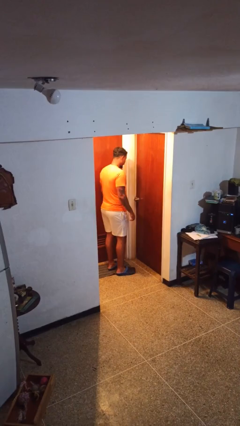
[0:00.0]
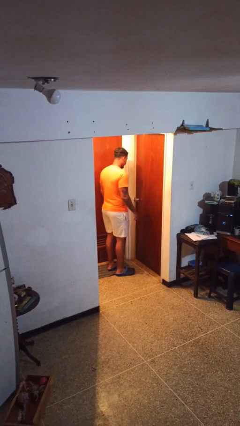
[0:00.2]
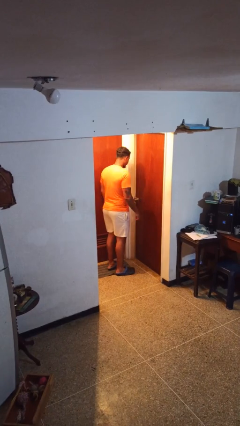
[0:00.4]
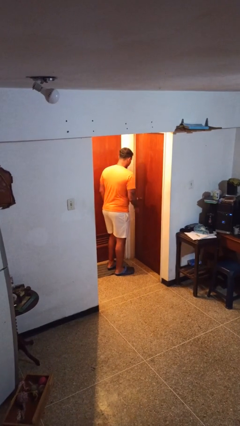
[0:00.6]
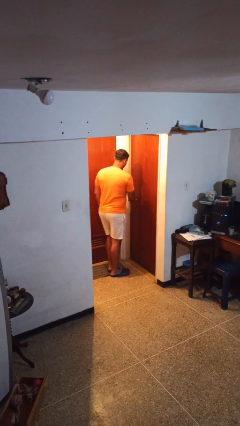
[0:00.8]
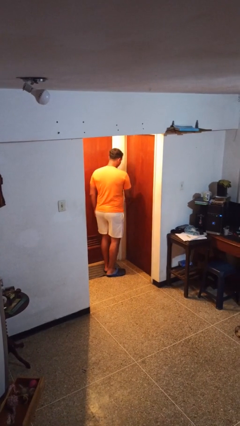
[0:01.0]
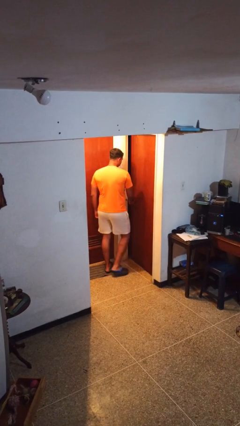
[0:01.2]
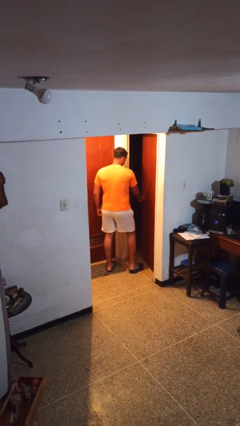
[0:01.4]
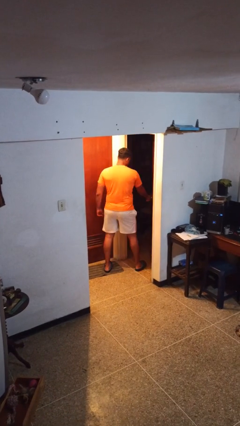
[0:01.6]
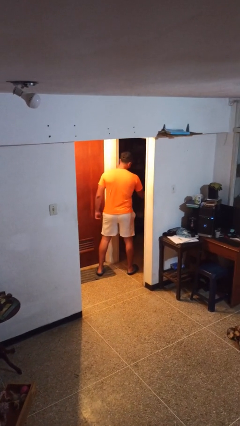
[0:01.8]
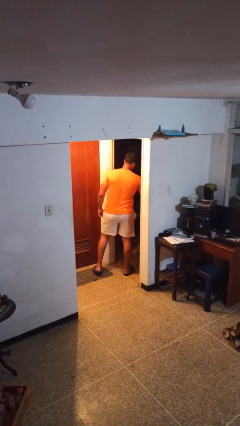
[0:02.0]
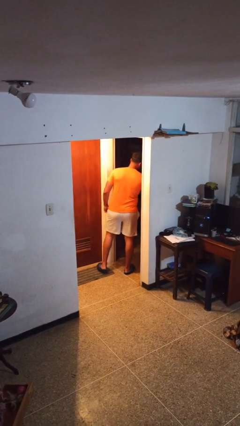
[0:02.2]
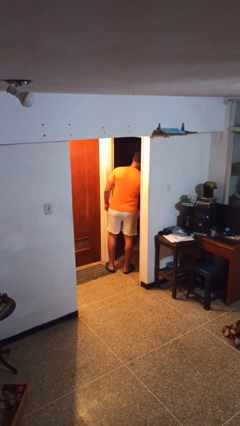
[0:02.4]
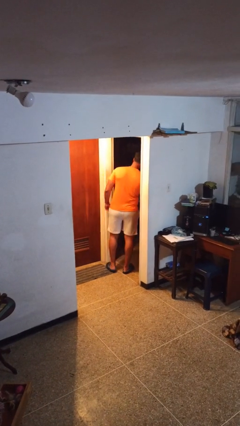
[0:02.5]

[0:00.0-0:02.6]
person opens facility door

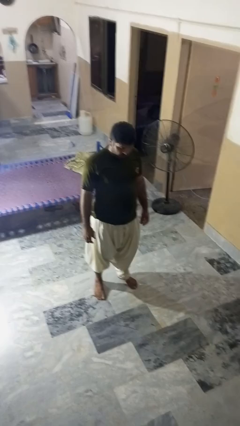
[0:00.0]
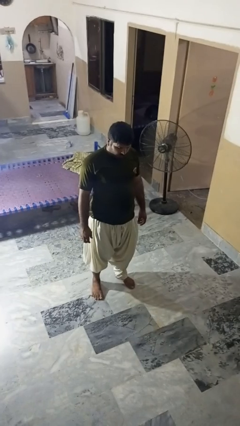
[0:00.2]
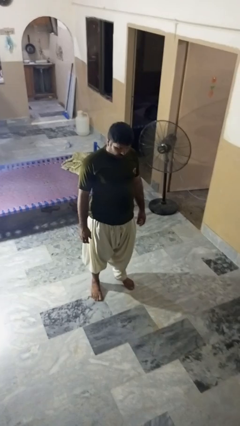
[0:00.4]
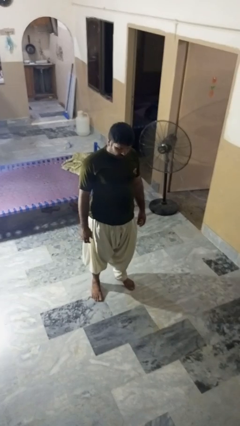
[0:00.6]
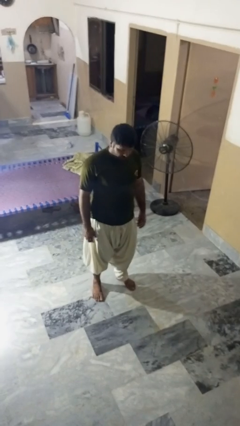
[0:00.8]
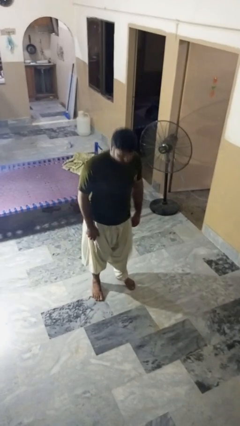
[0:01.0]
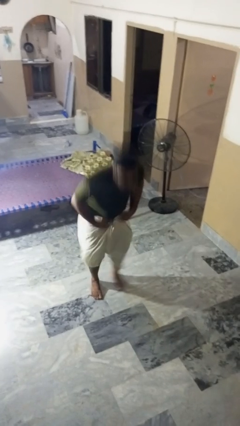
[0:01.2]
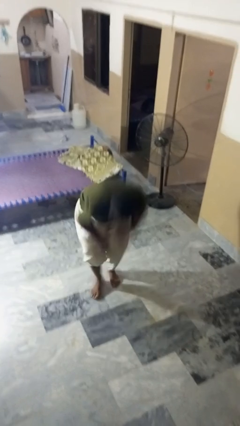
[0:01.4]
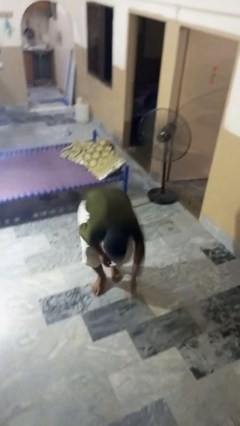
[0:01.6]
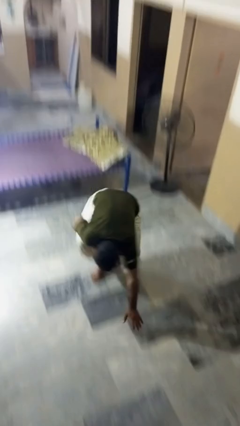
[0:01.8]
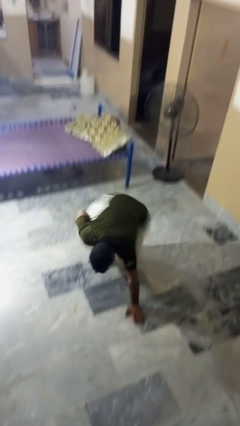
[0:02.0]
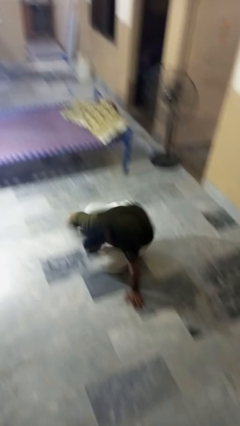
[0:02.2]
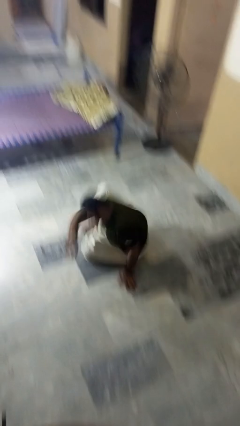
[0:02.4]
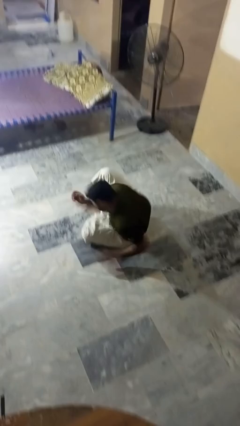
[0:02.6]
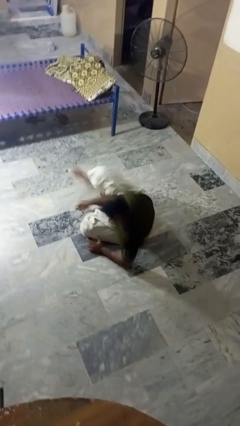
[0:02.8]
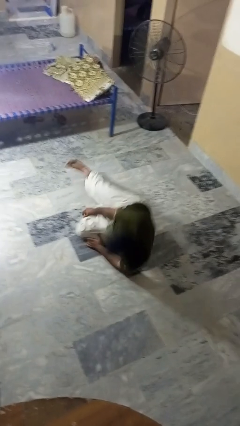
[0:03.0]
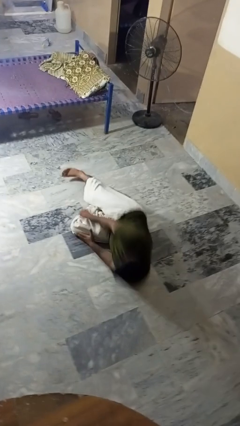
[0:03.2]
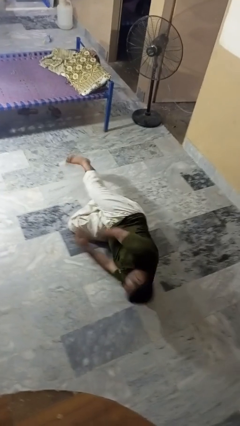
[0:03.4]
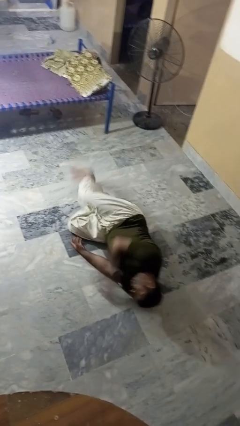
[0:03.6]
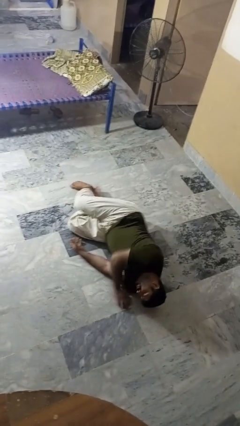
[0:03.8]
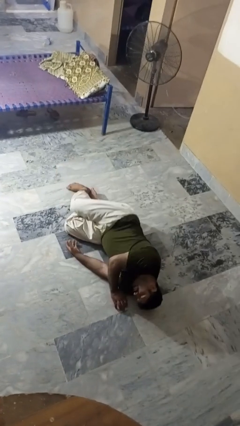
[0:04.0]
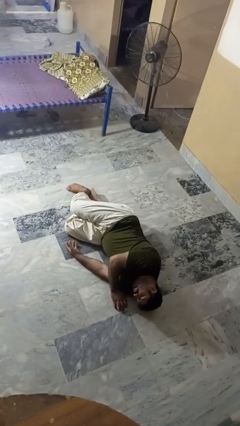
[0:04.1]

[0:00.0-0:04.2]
person falls while standing

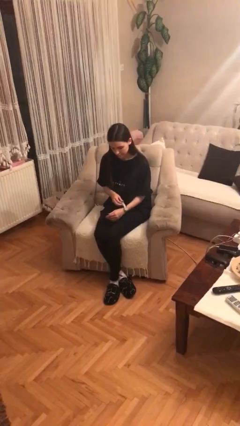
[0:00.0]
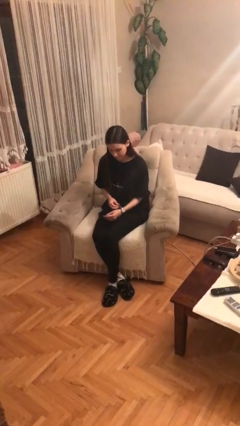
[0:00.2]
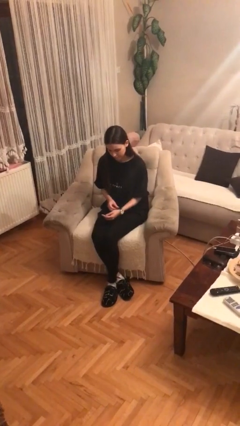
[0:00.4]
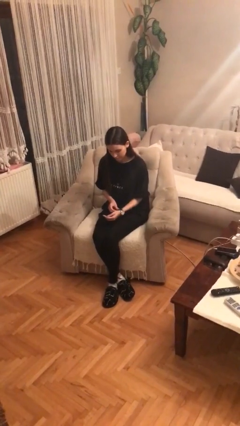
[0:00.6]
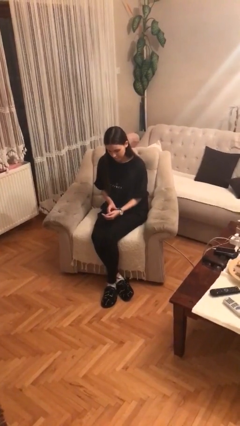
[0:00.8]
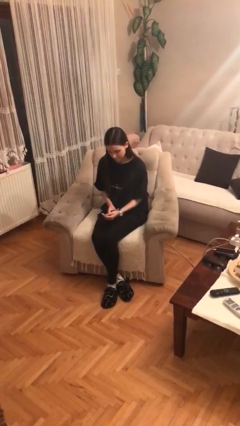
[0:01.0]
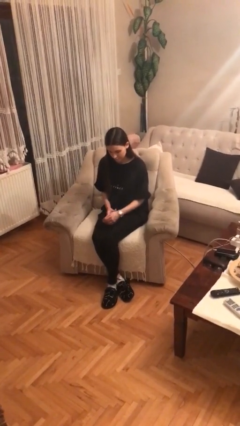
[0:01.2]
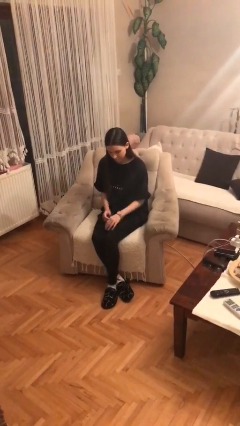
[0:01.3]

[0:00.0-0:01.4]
person puts on wristwatch

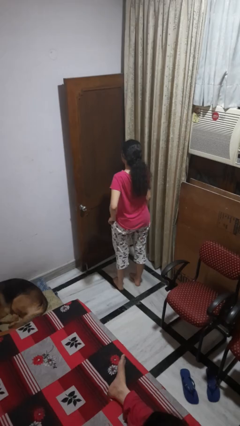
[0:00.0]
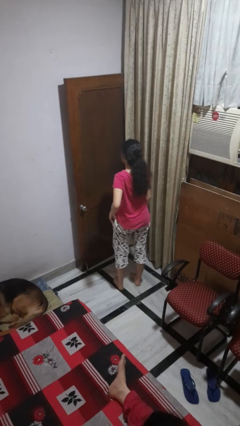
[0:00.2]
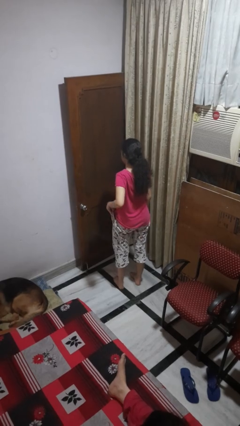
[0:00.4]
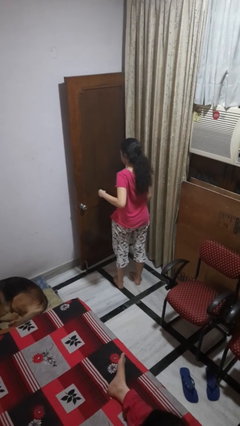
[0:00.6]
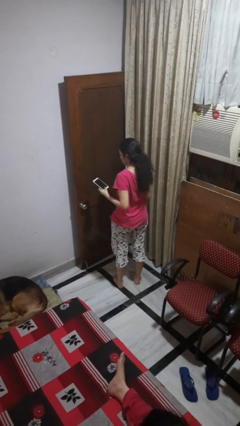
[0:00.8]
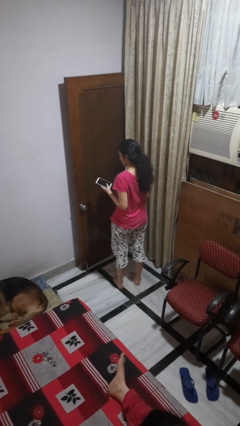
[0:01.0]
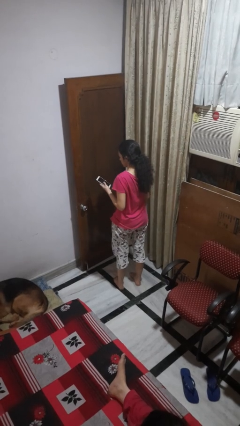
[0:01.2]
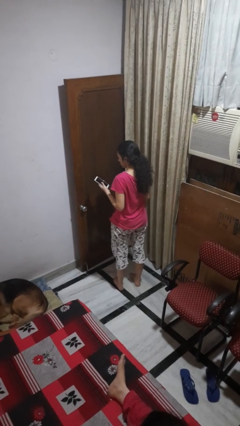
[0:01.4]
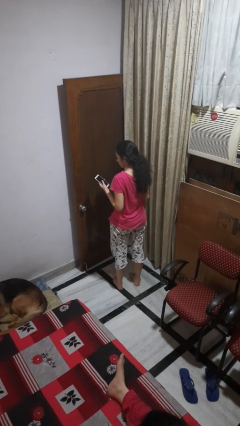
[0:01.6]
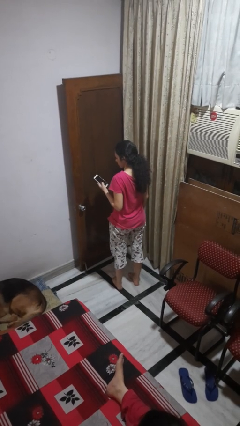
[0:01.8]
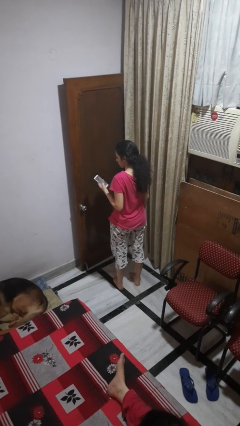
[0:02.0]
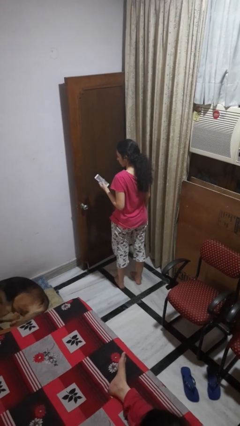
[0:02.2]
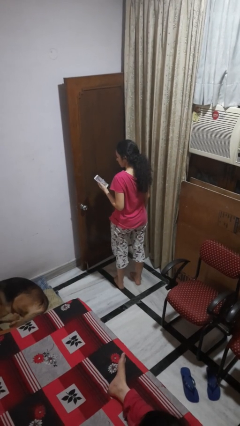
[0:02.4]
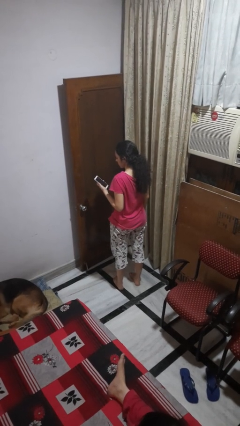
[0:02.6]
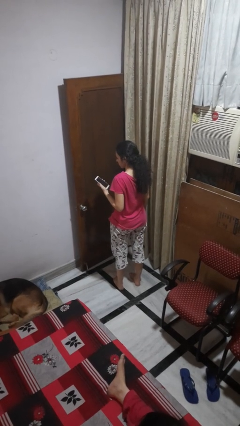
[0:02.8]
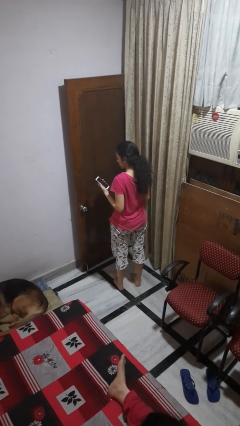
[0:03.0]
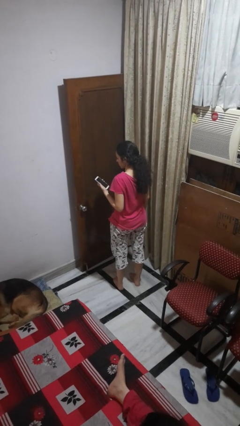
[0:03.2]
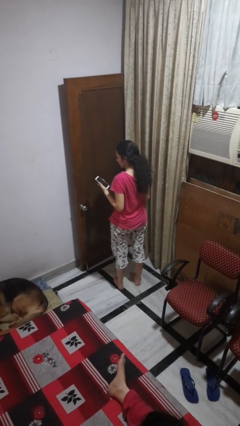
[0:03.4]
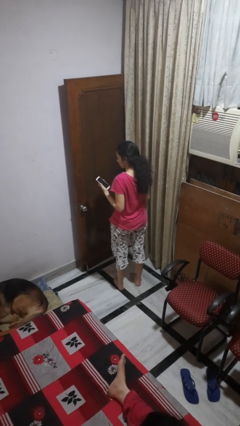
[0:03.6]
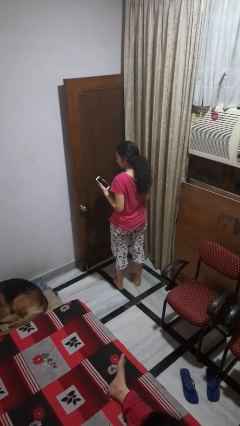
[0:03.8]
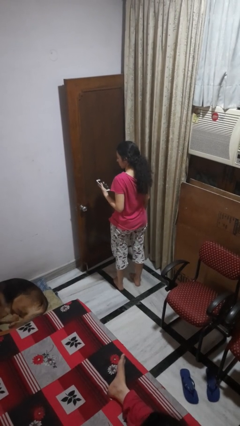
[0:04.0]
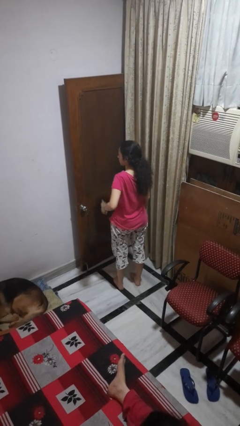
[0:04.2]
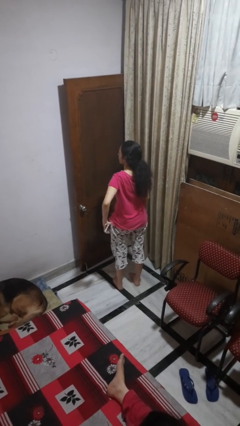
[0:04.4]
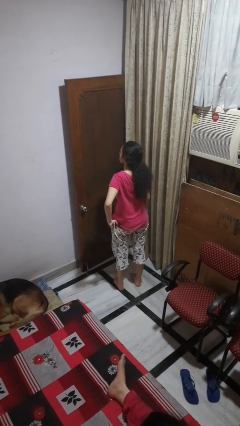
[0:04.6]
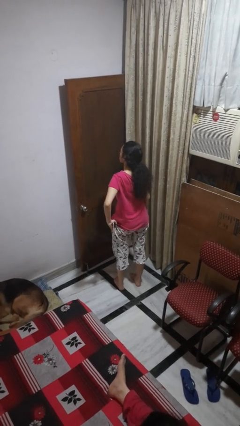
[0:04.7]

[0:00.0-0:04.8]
person takes phone from pocket

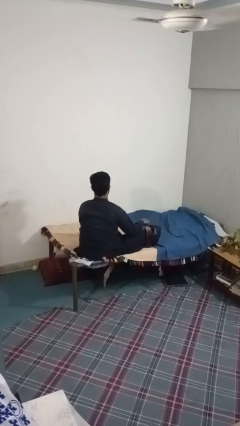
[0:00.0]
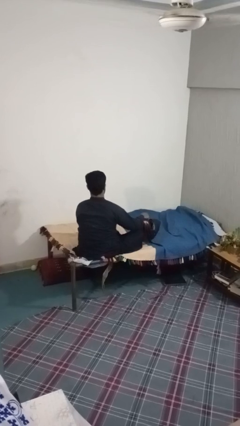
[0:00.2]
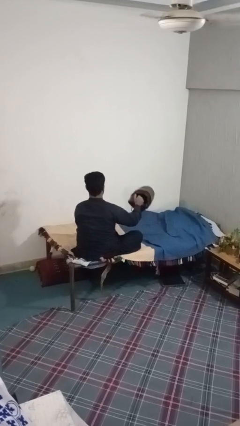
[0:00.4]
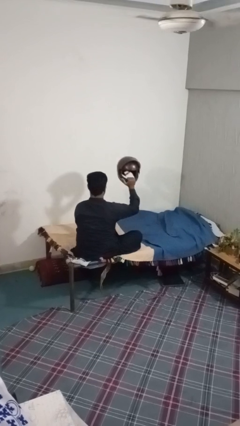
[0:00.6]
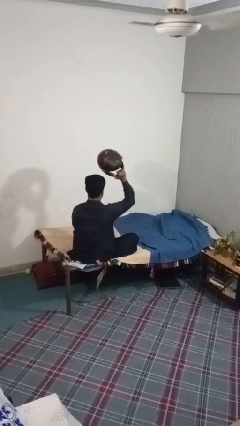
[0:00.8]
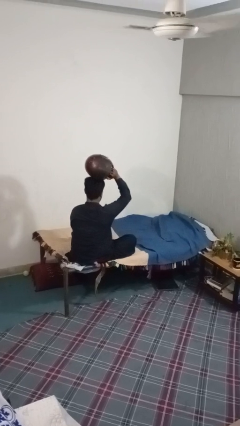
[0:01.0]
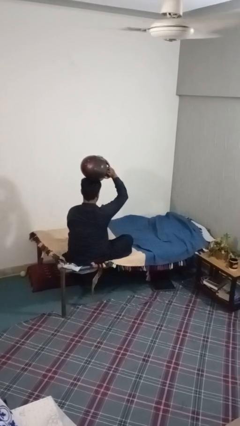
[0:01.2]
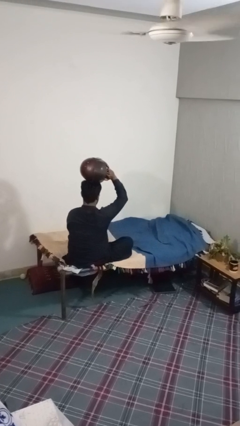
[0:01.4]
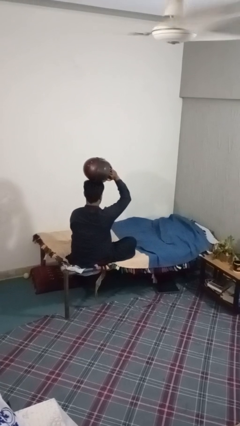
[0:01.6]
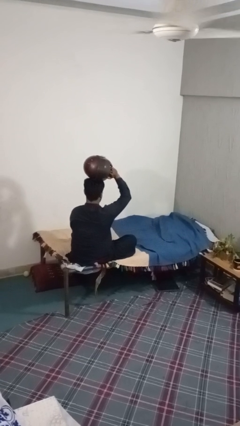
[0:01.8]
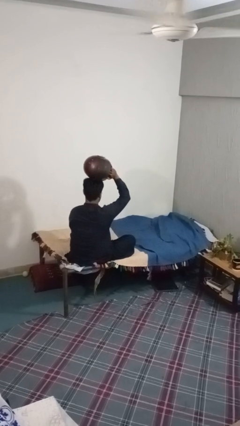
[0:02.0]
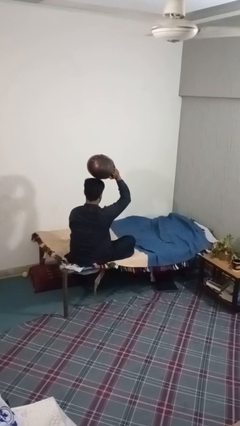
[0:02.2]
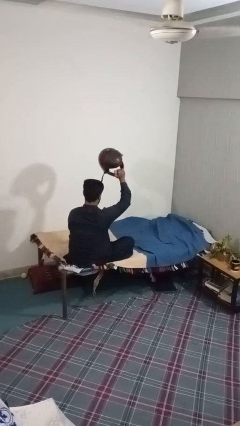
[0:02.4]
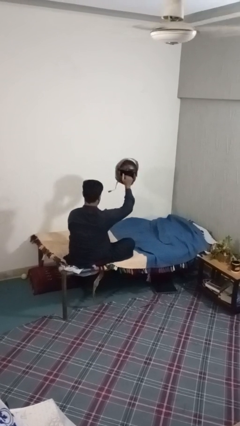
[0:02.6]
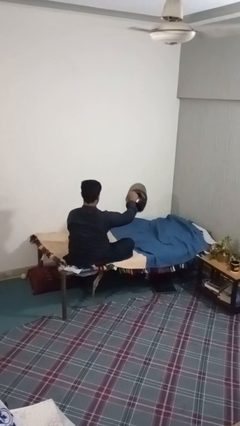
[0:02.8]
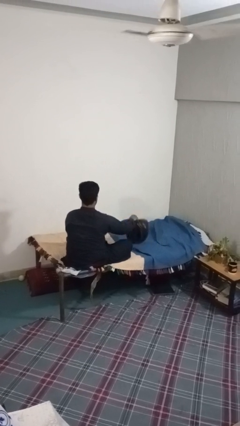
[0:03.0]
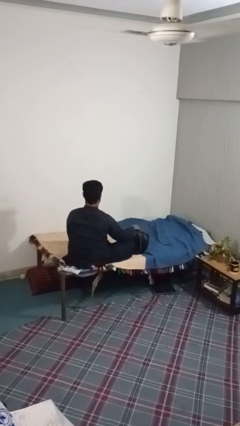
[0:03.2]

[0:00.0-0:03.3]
person holds object above head

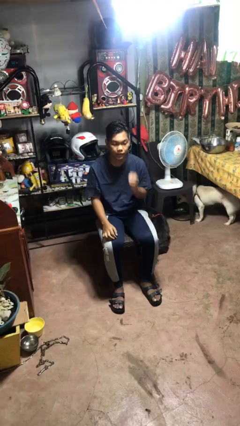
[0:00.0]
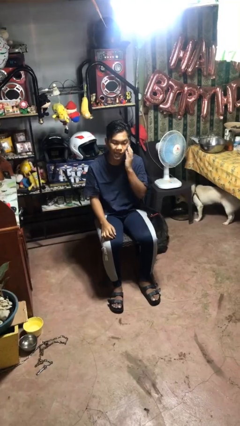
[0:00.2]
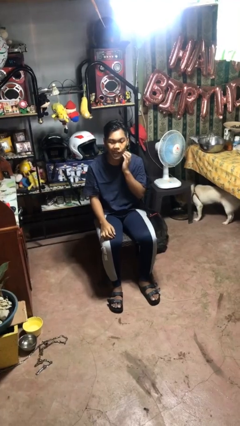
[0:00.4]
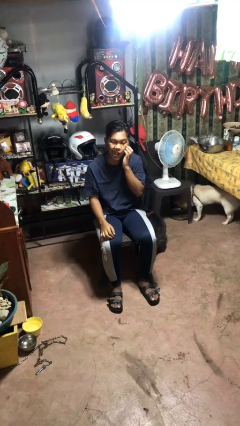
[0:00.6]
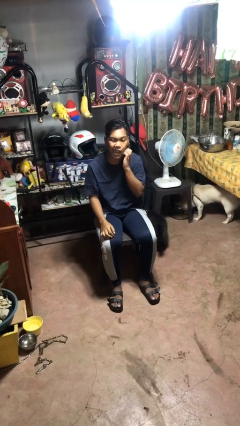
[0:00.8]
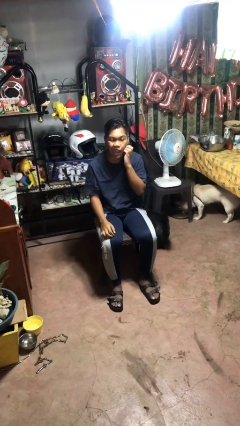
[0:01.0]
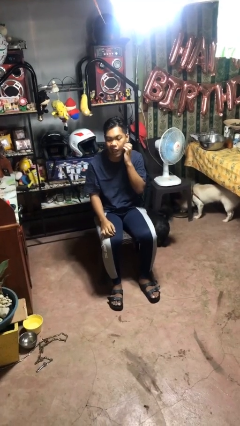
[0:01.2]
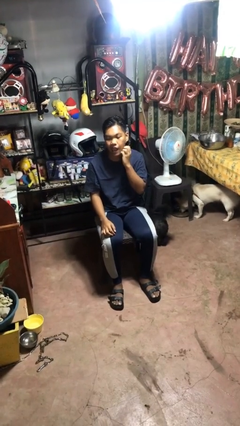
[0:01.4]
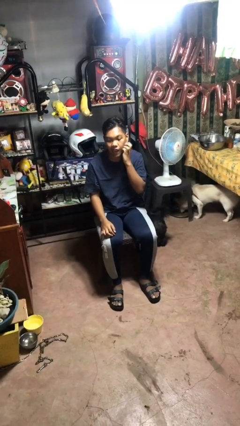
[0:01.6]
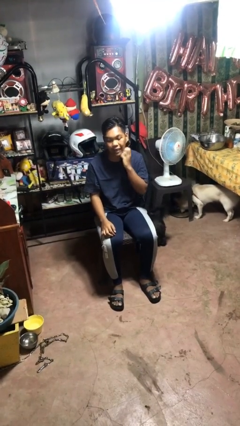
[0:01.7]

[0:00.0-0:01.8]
person scratches face
